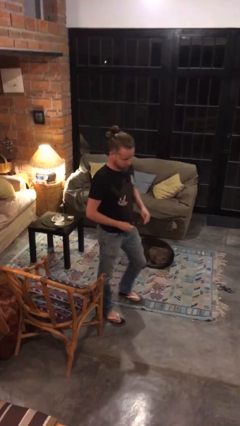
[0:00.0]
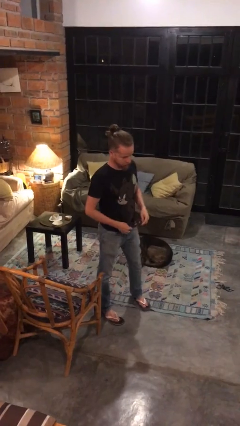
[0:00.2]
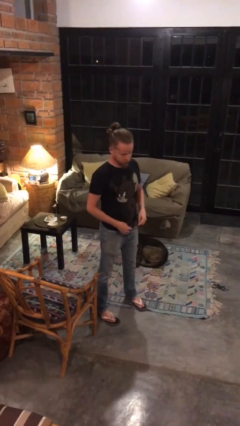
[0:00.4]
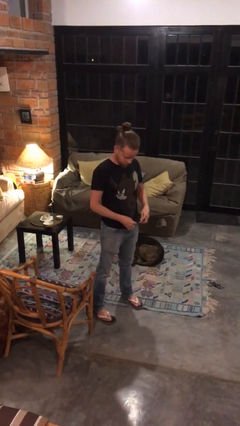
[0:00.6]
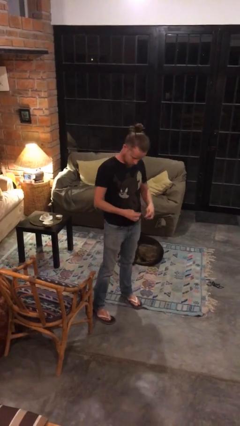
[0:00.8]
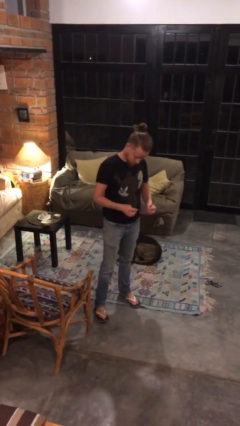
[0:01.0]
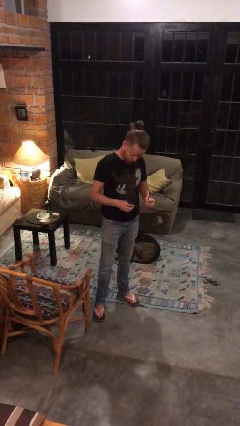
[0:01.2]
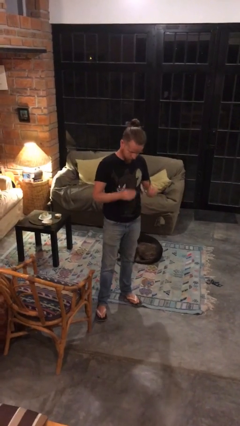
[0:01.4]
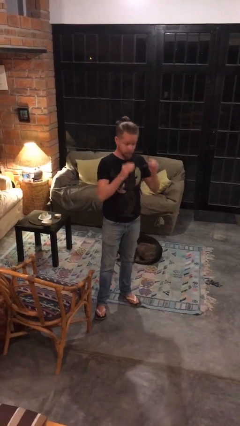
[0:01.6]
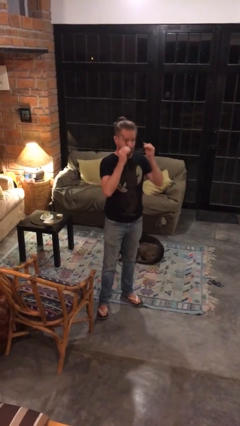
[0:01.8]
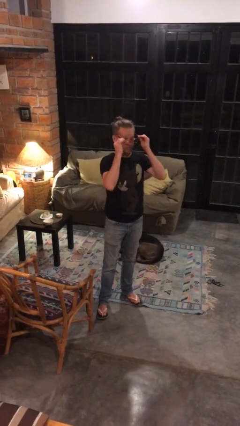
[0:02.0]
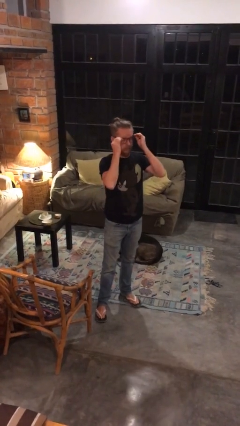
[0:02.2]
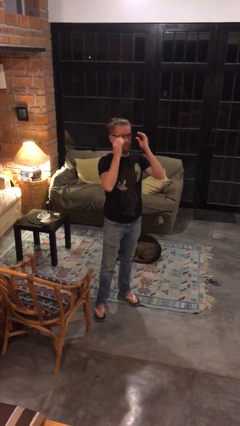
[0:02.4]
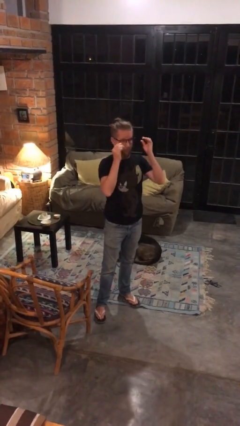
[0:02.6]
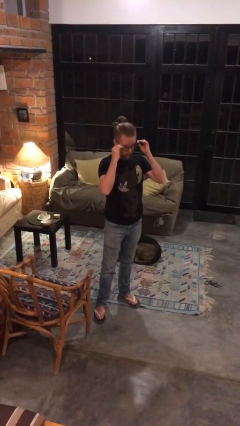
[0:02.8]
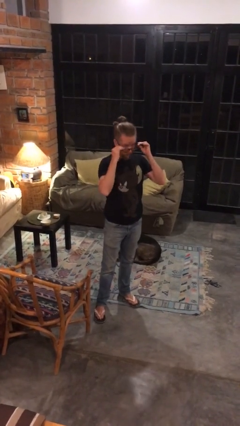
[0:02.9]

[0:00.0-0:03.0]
person puts on glasses

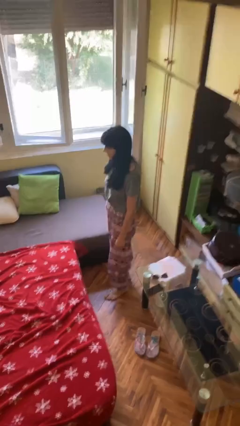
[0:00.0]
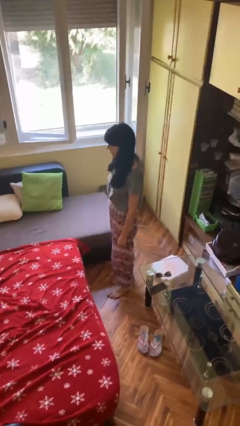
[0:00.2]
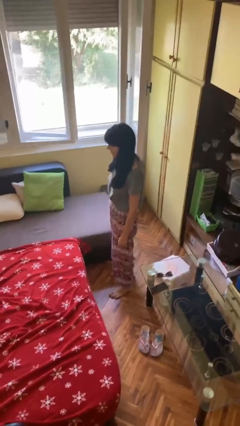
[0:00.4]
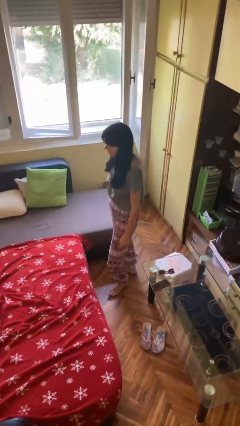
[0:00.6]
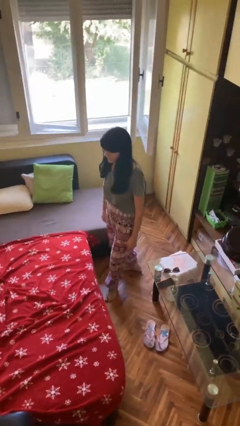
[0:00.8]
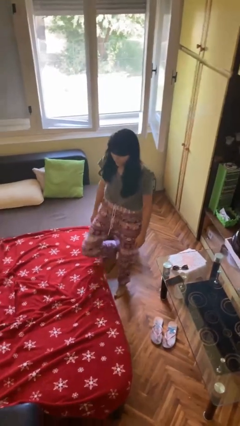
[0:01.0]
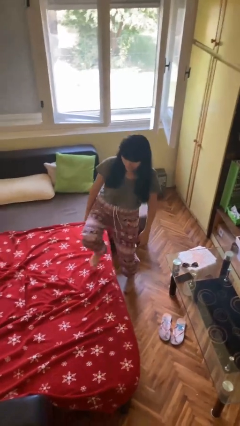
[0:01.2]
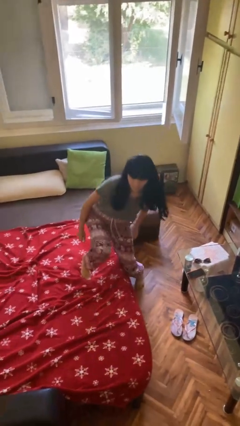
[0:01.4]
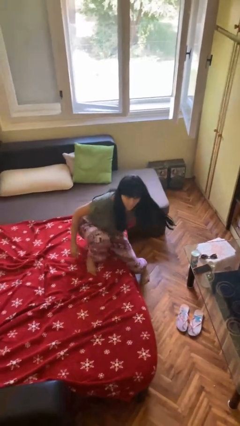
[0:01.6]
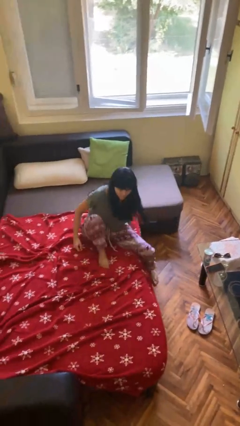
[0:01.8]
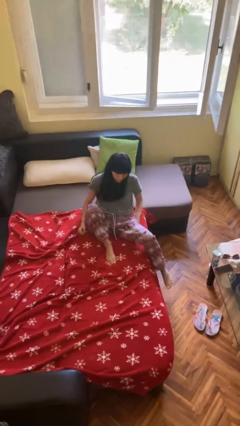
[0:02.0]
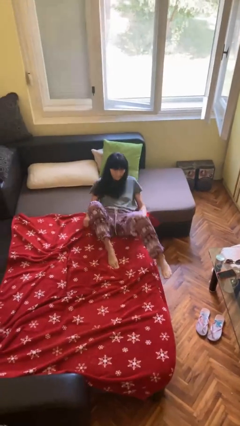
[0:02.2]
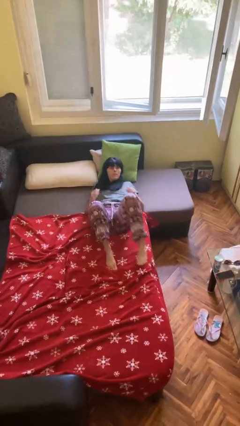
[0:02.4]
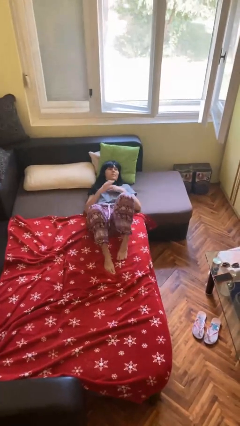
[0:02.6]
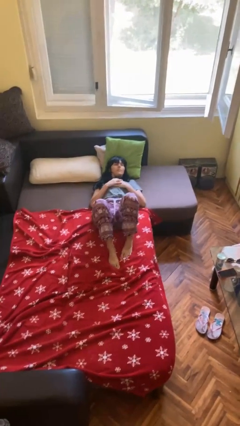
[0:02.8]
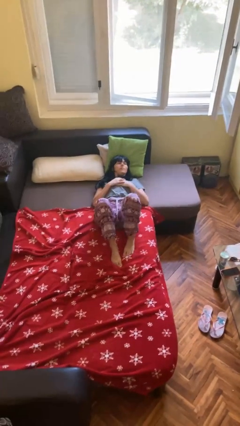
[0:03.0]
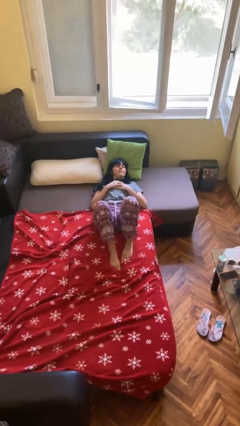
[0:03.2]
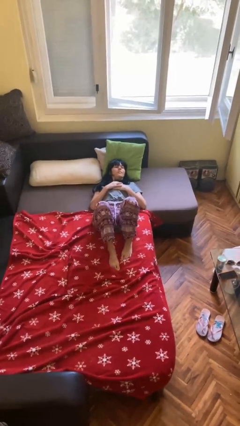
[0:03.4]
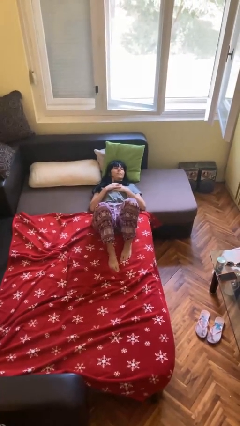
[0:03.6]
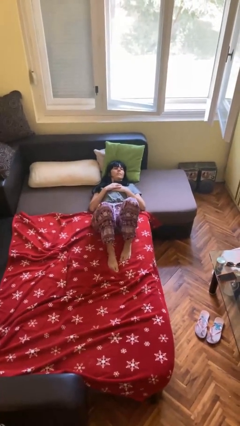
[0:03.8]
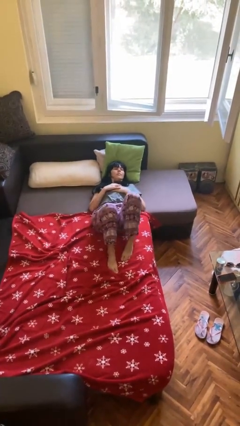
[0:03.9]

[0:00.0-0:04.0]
person lies down on bed

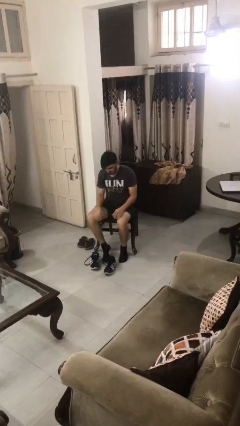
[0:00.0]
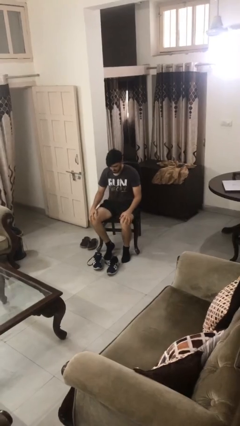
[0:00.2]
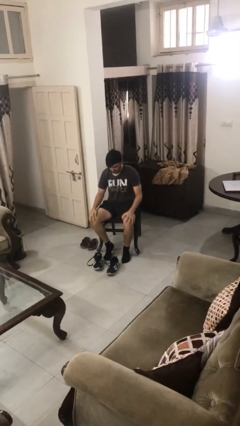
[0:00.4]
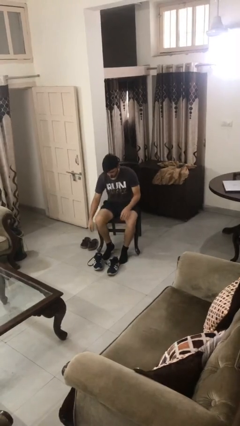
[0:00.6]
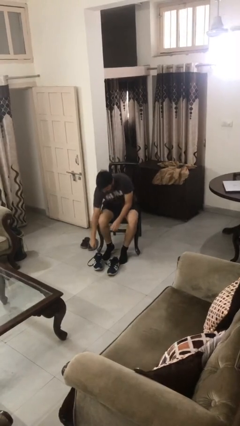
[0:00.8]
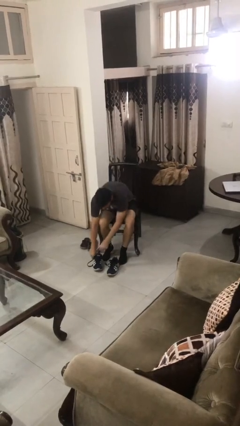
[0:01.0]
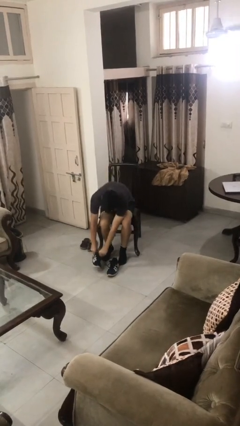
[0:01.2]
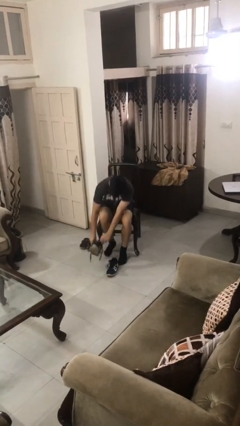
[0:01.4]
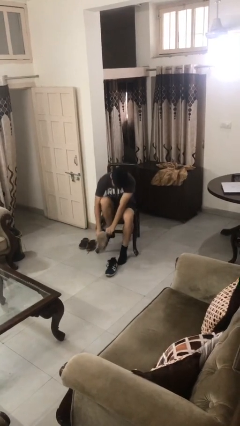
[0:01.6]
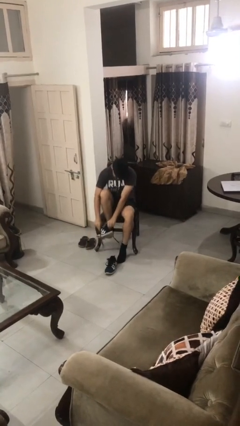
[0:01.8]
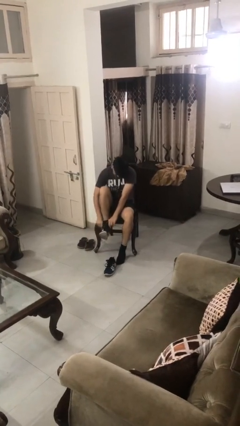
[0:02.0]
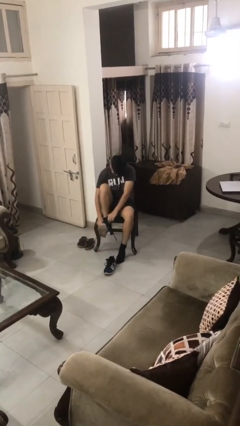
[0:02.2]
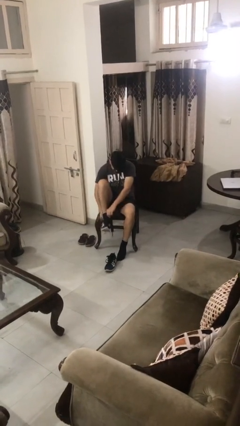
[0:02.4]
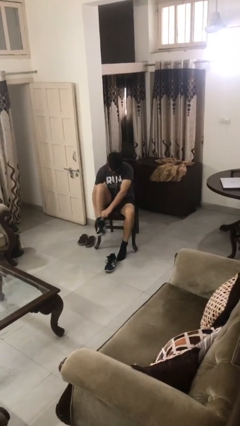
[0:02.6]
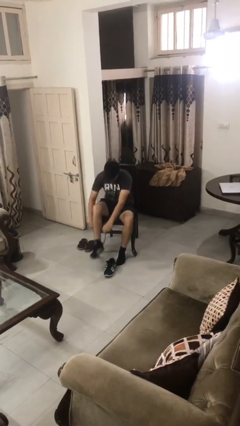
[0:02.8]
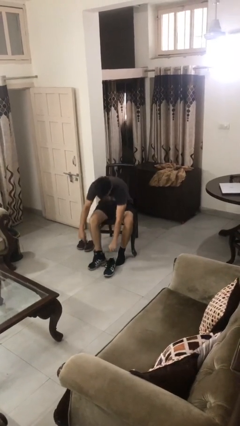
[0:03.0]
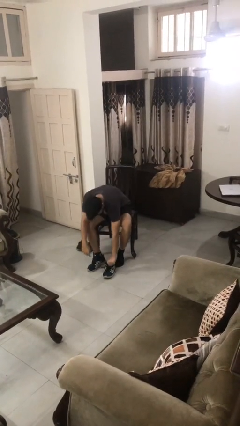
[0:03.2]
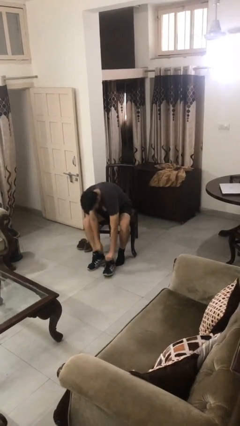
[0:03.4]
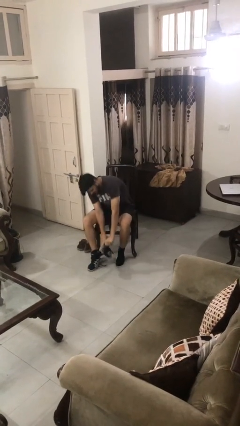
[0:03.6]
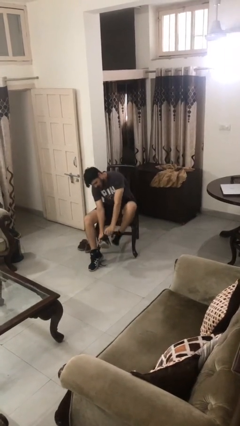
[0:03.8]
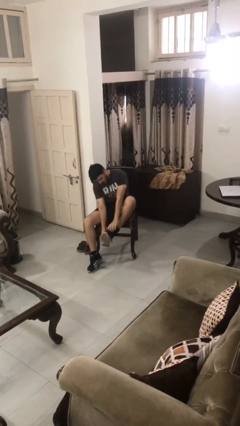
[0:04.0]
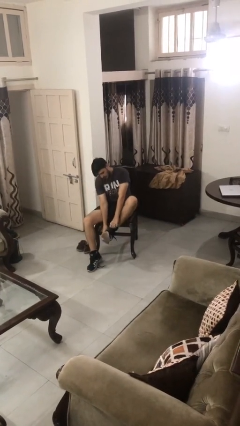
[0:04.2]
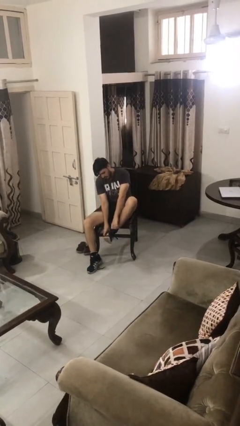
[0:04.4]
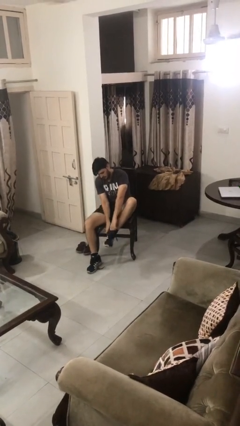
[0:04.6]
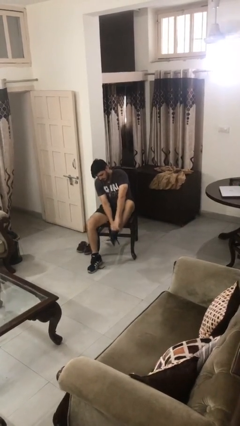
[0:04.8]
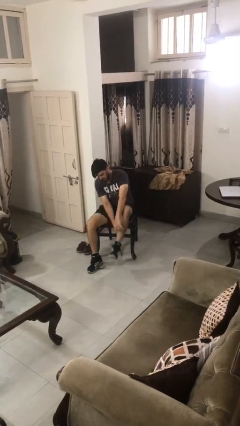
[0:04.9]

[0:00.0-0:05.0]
person puts on shoes

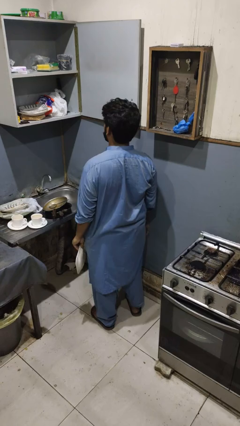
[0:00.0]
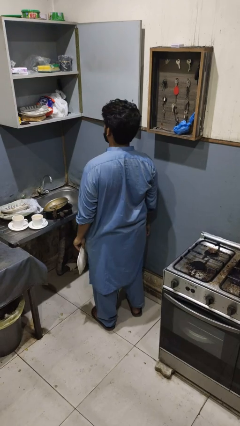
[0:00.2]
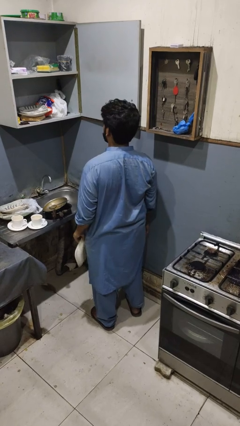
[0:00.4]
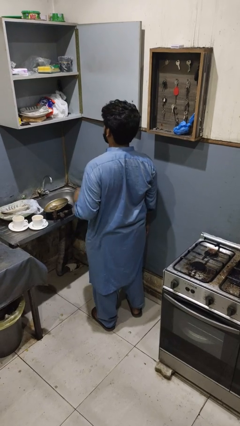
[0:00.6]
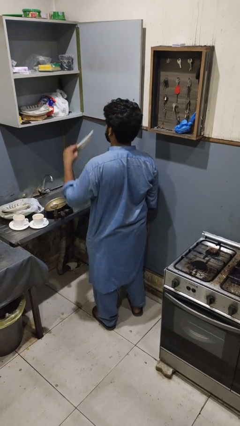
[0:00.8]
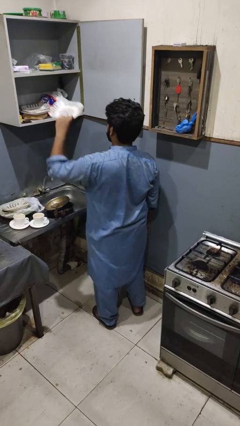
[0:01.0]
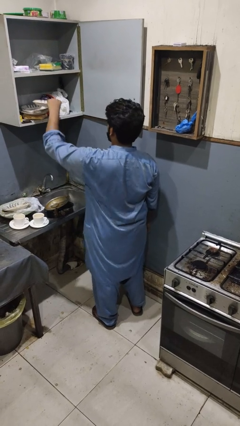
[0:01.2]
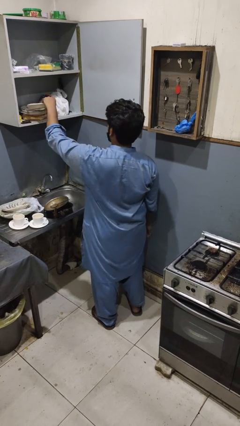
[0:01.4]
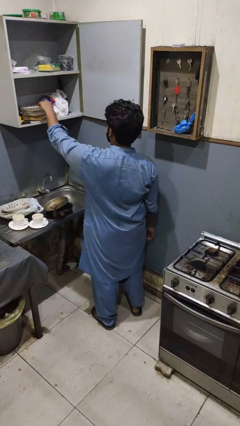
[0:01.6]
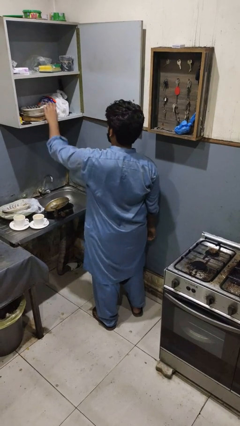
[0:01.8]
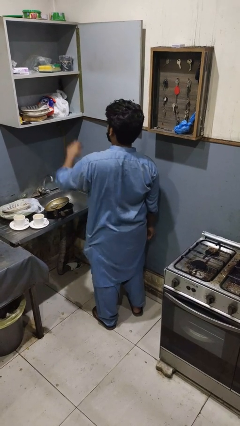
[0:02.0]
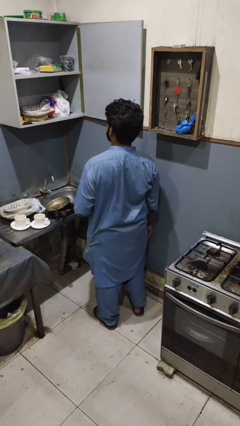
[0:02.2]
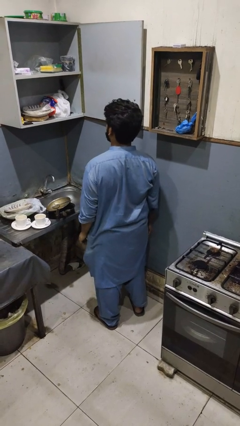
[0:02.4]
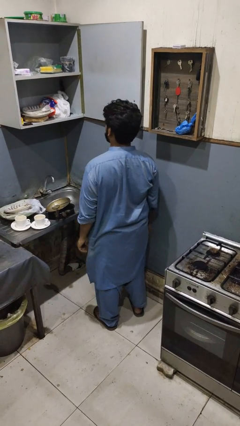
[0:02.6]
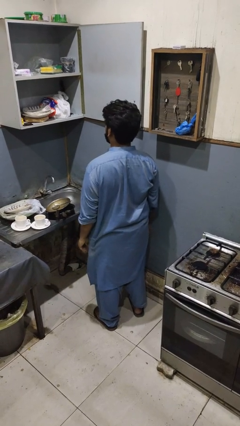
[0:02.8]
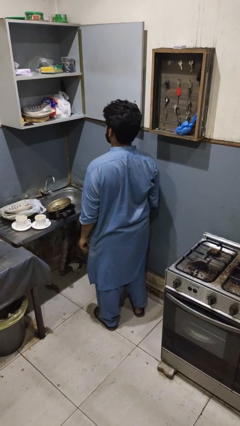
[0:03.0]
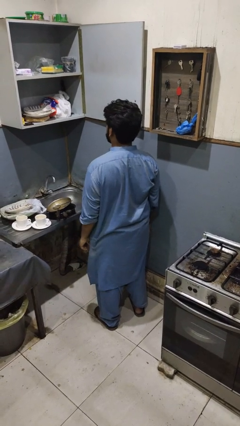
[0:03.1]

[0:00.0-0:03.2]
person puts object in cabinet

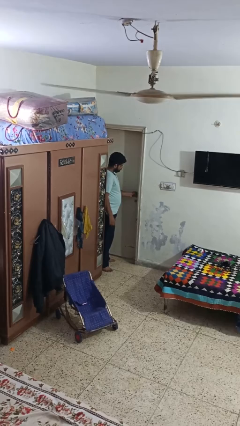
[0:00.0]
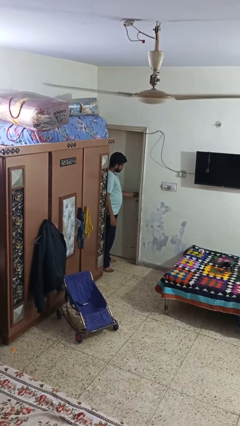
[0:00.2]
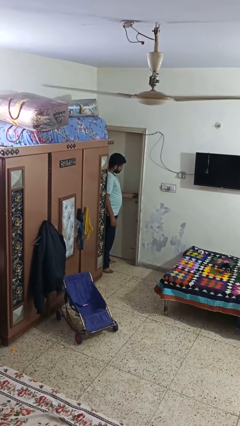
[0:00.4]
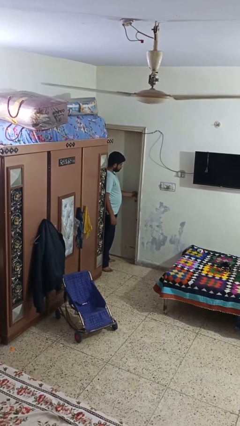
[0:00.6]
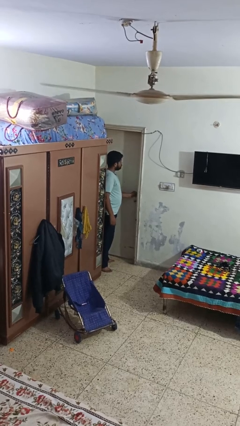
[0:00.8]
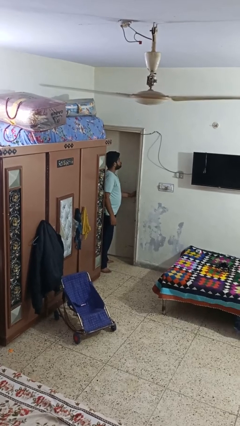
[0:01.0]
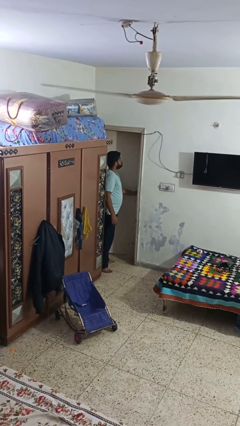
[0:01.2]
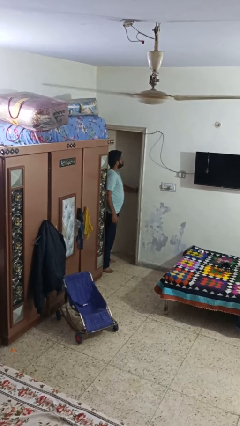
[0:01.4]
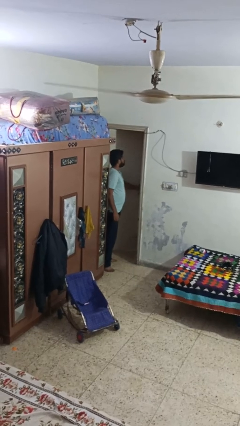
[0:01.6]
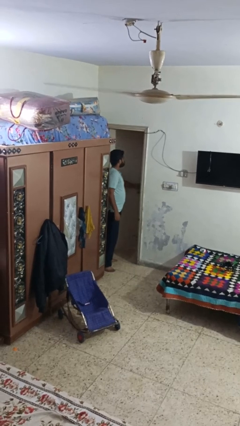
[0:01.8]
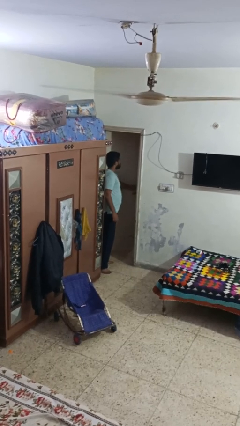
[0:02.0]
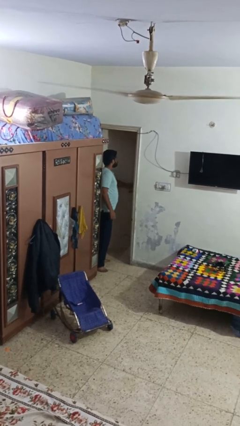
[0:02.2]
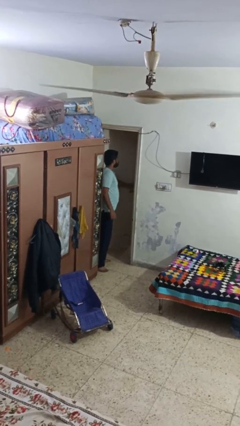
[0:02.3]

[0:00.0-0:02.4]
person opens facility door
